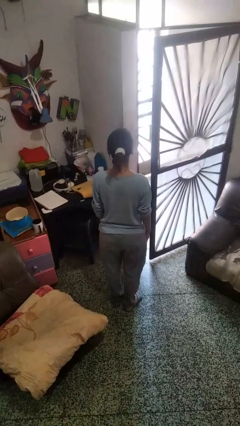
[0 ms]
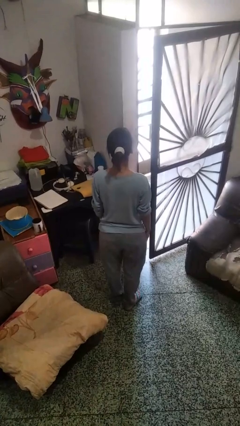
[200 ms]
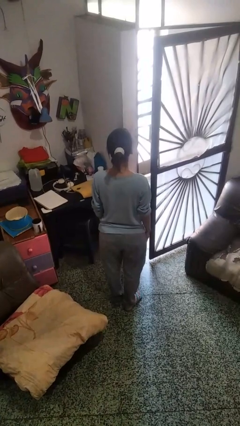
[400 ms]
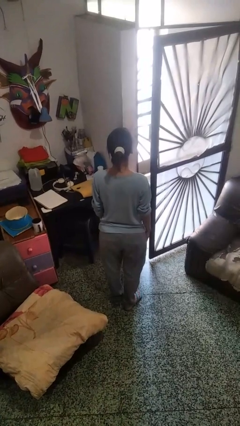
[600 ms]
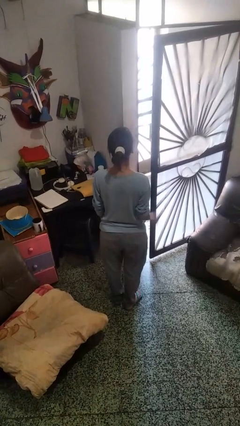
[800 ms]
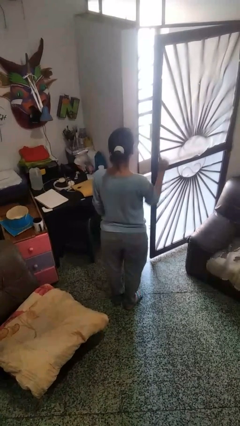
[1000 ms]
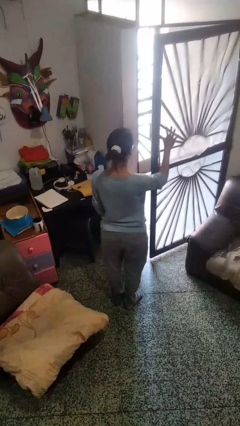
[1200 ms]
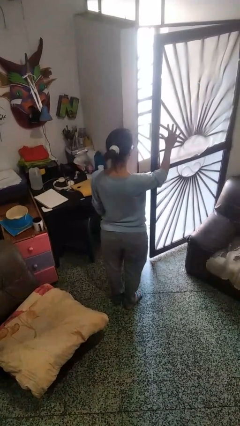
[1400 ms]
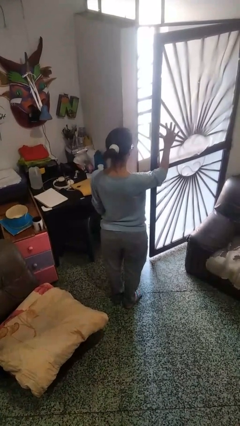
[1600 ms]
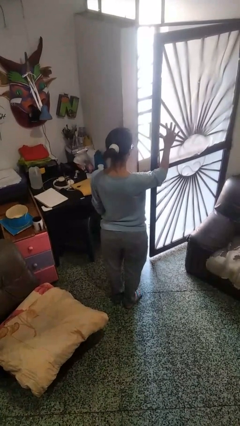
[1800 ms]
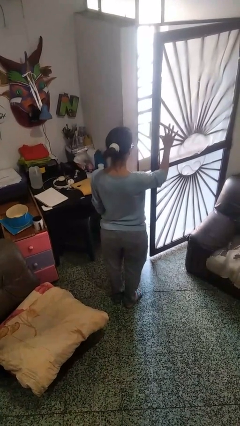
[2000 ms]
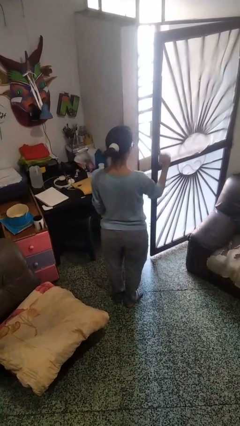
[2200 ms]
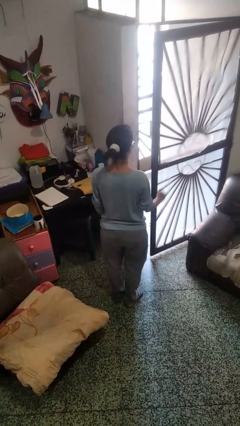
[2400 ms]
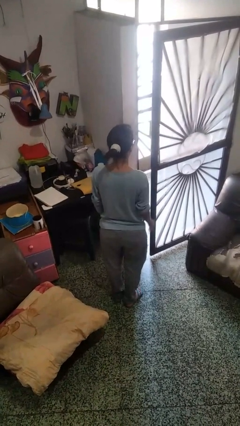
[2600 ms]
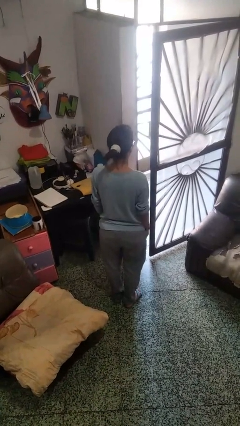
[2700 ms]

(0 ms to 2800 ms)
person gestures number five

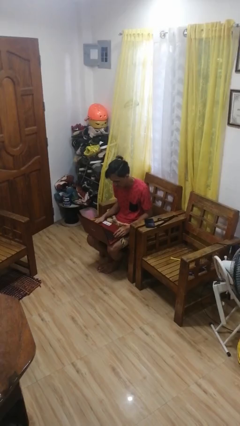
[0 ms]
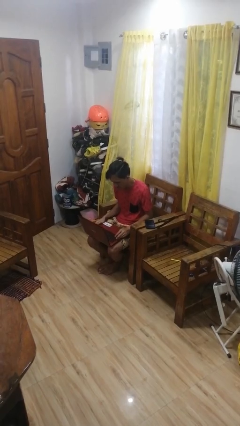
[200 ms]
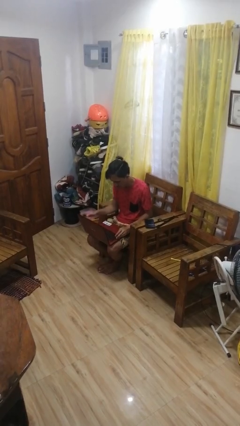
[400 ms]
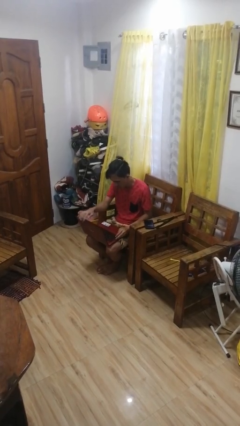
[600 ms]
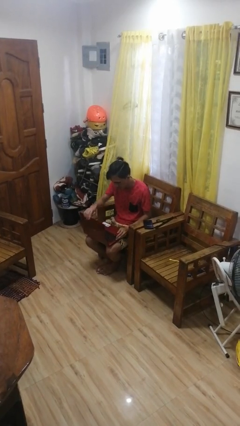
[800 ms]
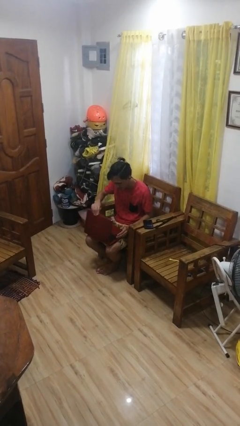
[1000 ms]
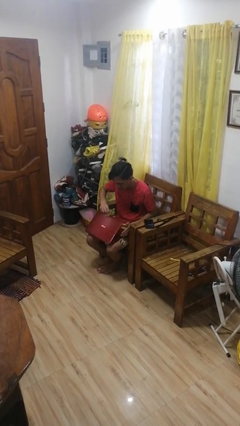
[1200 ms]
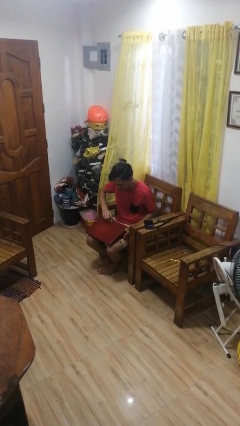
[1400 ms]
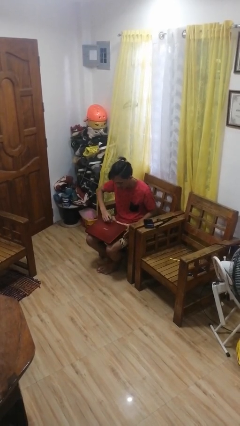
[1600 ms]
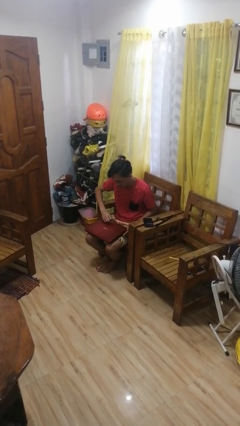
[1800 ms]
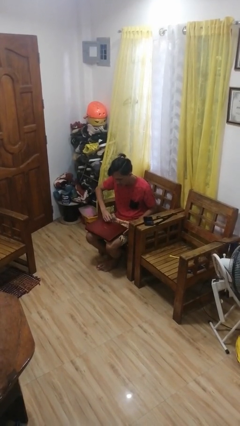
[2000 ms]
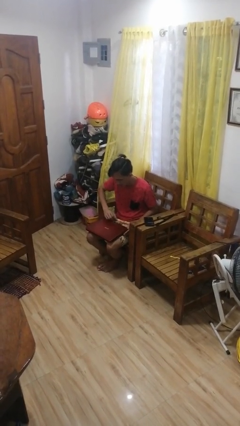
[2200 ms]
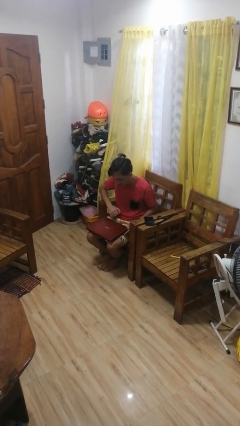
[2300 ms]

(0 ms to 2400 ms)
person closes laptop

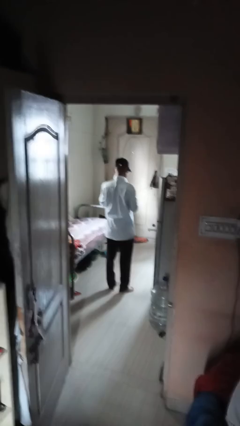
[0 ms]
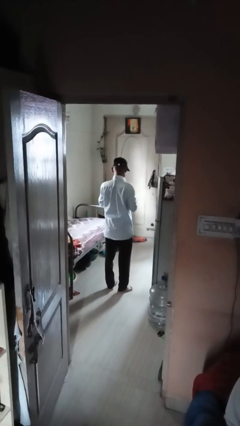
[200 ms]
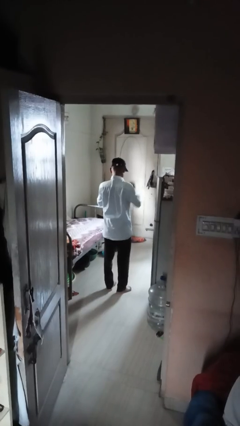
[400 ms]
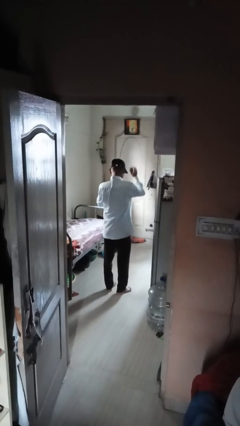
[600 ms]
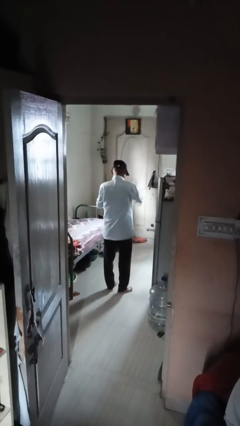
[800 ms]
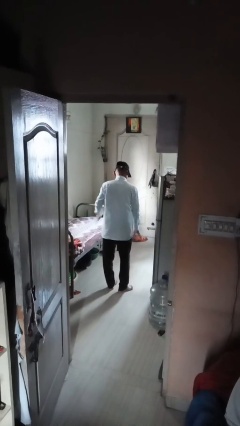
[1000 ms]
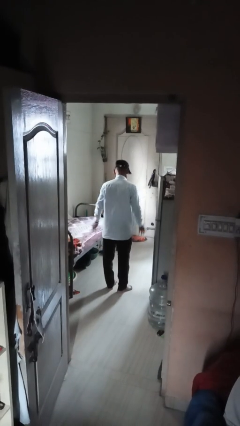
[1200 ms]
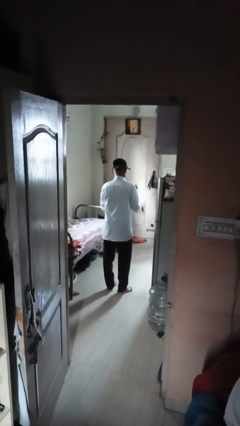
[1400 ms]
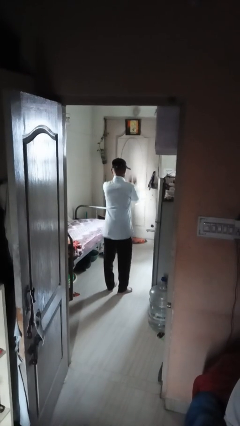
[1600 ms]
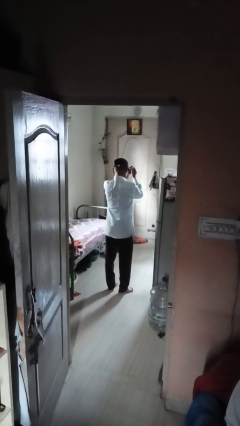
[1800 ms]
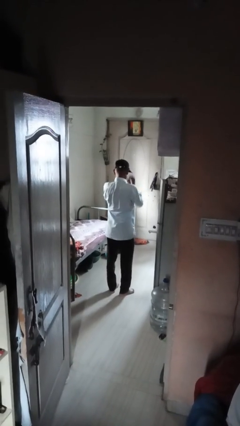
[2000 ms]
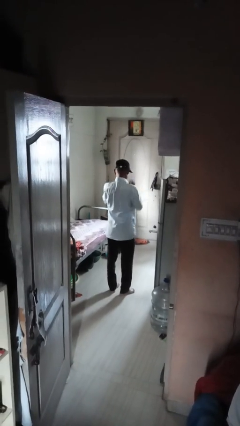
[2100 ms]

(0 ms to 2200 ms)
person bounces ball on floor

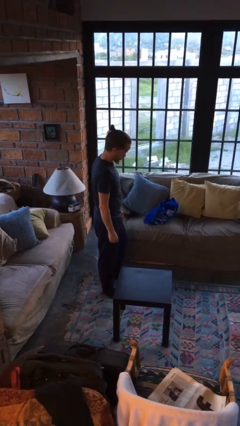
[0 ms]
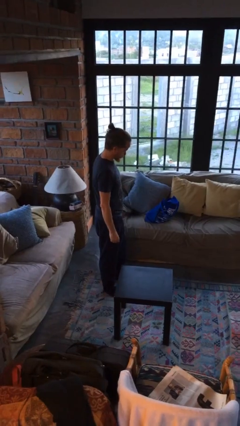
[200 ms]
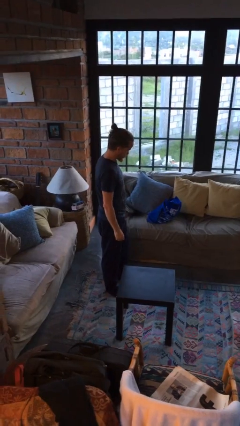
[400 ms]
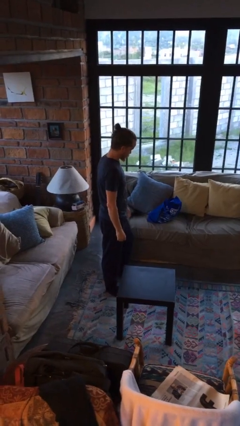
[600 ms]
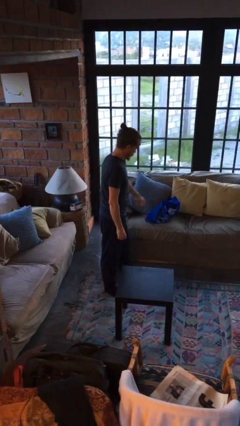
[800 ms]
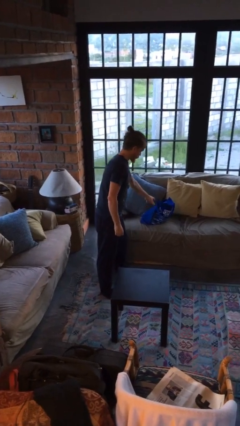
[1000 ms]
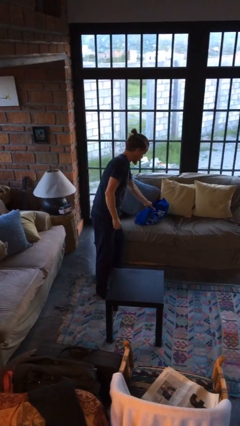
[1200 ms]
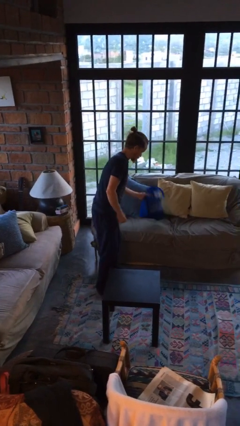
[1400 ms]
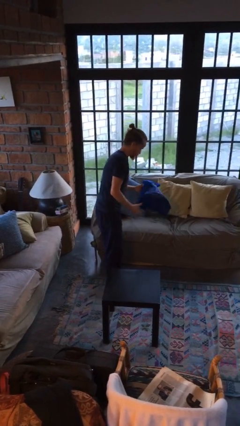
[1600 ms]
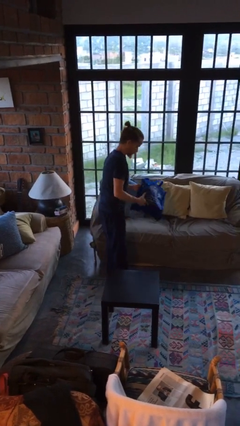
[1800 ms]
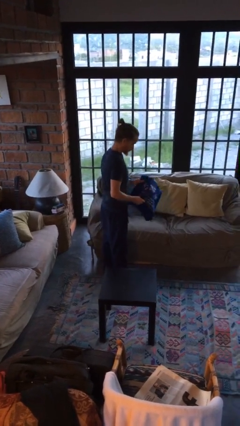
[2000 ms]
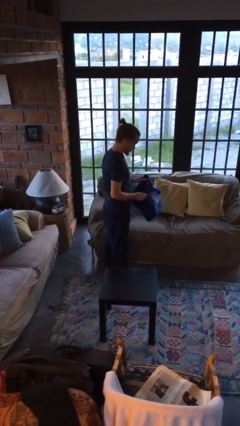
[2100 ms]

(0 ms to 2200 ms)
person picks up object from couch

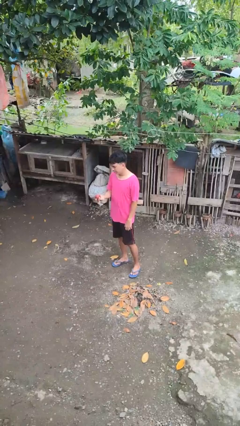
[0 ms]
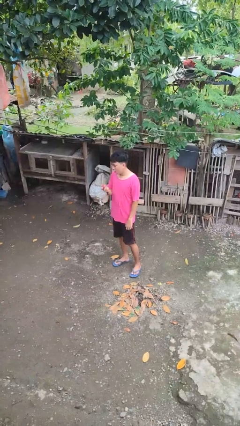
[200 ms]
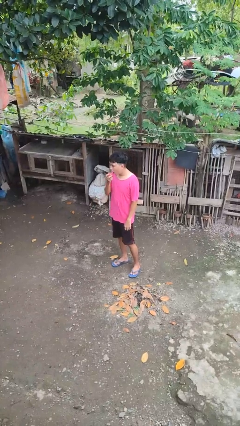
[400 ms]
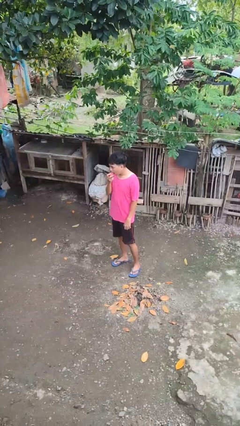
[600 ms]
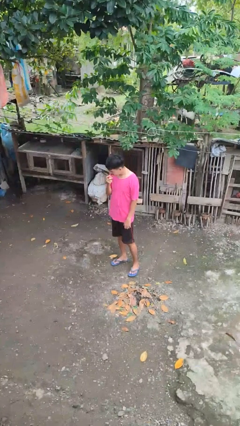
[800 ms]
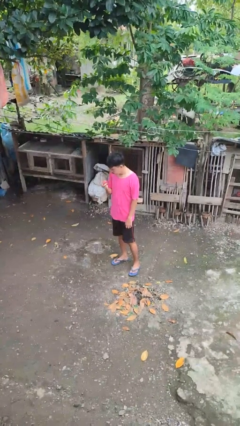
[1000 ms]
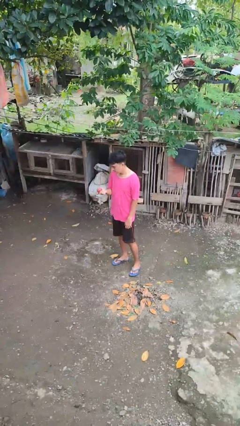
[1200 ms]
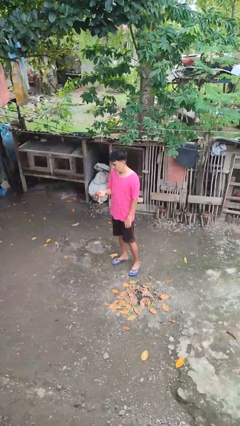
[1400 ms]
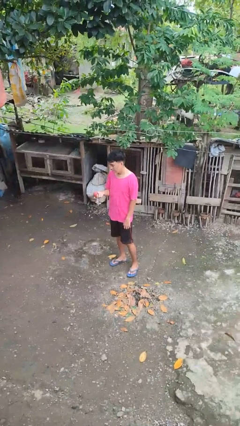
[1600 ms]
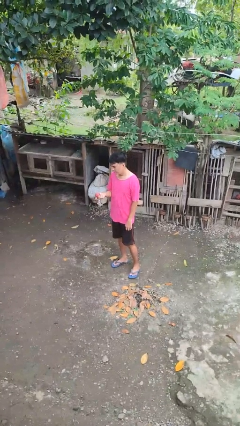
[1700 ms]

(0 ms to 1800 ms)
person eats apple

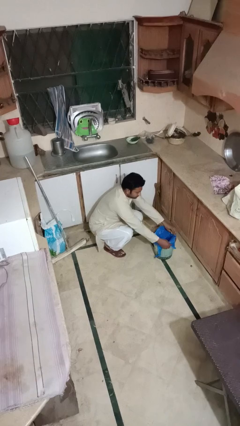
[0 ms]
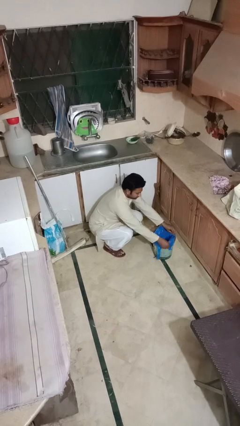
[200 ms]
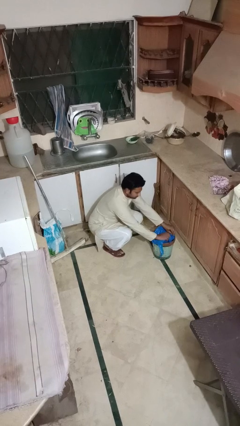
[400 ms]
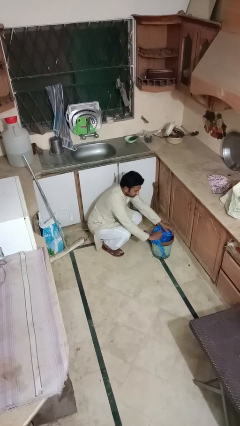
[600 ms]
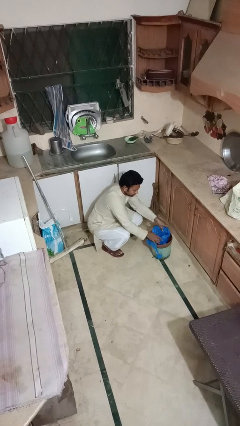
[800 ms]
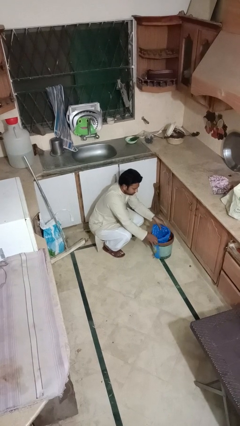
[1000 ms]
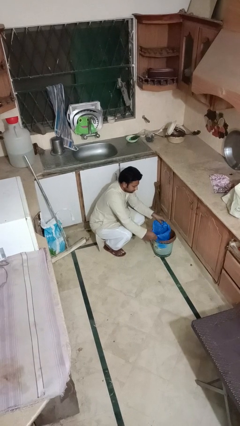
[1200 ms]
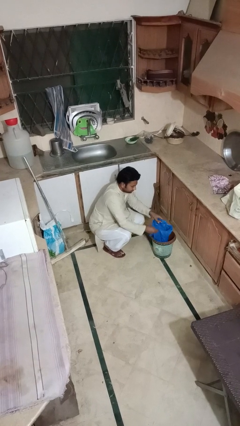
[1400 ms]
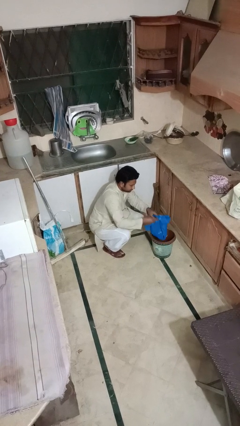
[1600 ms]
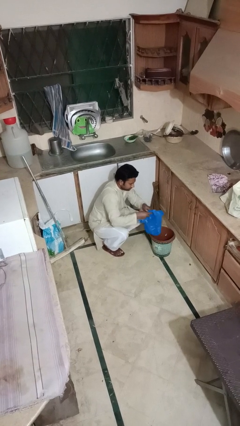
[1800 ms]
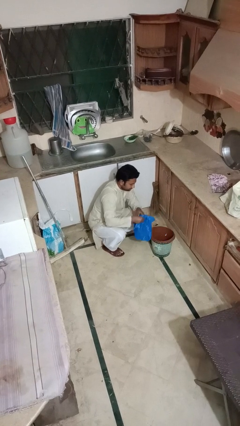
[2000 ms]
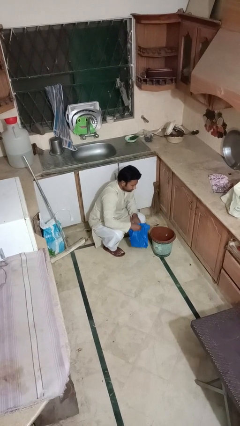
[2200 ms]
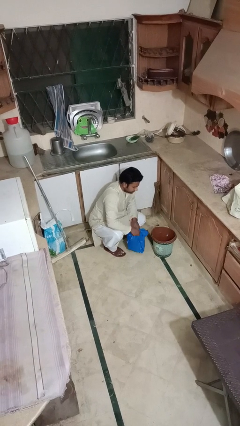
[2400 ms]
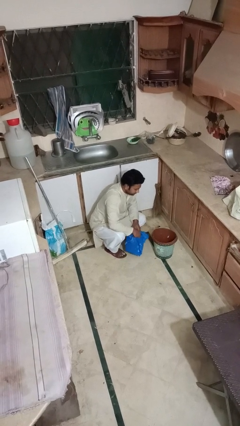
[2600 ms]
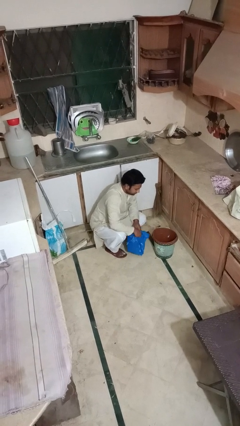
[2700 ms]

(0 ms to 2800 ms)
person removes trashbag from trashcan

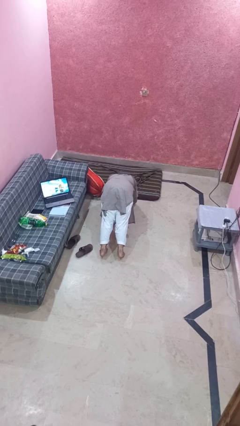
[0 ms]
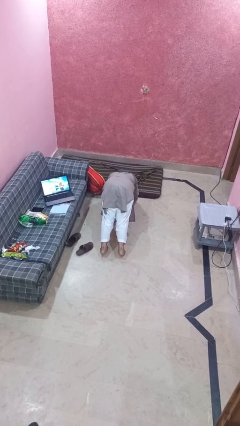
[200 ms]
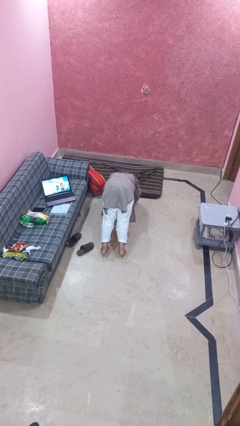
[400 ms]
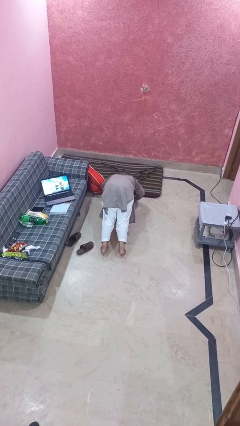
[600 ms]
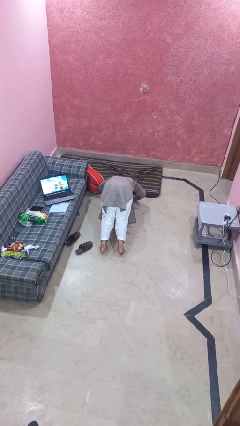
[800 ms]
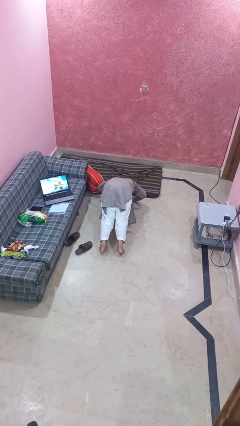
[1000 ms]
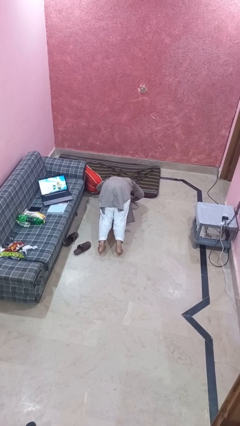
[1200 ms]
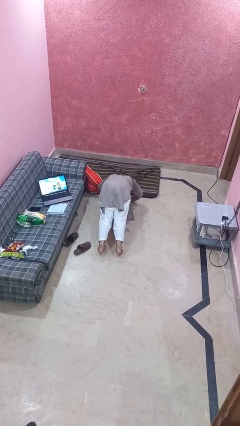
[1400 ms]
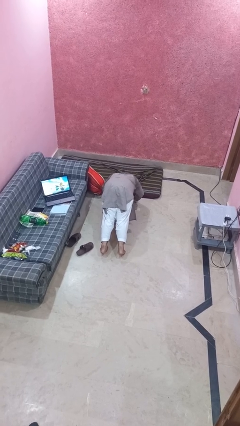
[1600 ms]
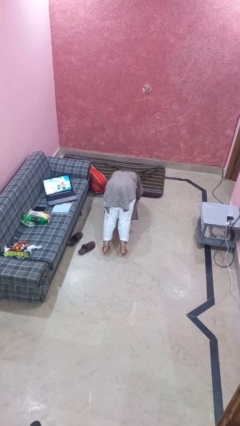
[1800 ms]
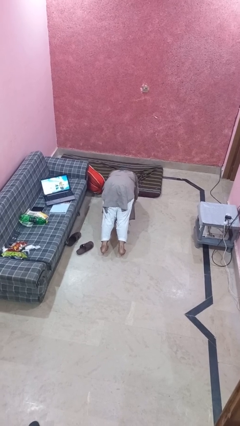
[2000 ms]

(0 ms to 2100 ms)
person exercises with pushup

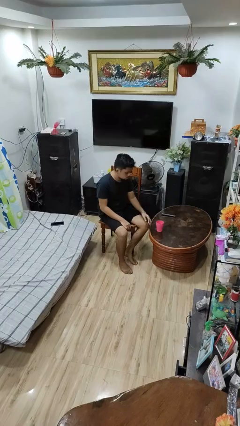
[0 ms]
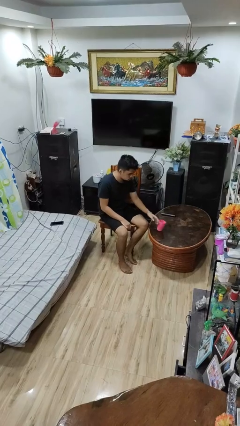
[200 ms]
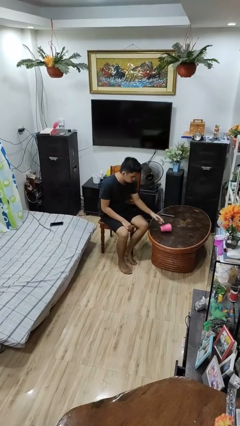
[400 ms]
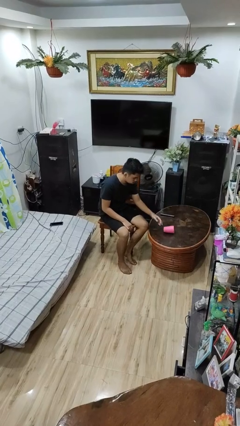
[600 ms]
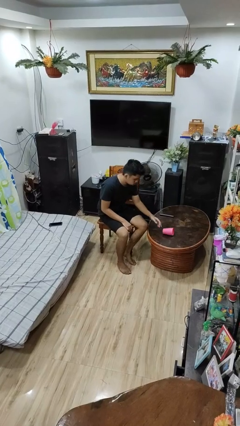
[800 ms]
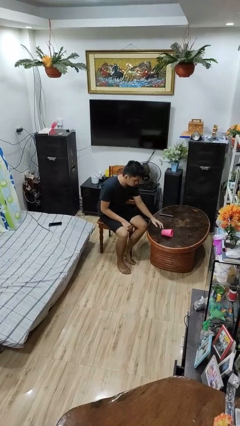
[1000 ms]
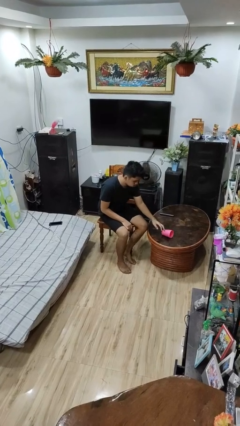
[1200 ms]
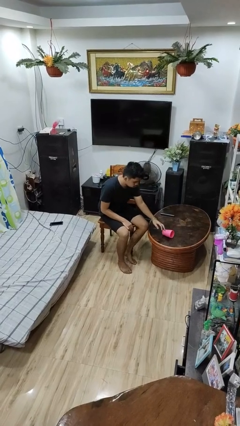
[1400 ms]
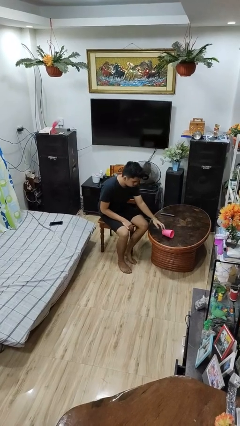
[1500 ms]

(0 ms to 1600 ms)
person knocks over glass
